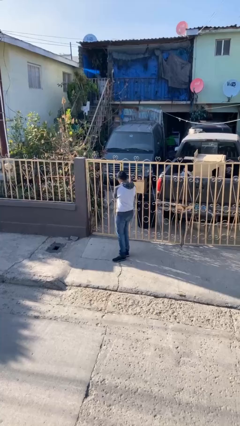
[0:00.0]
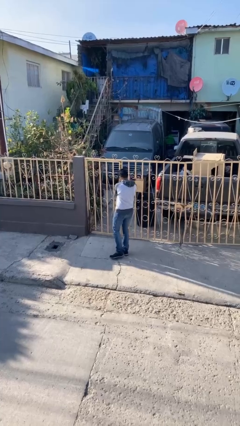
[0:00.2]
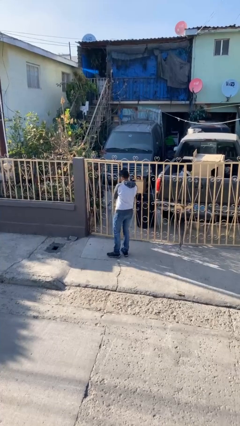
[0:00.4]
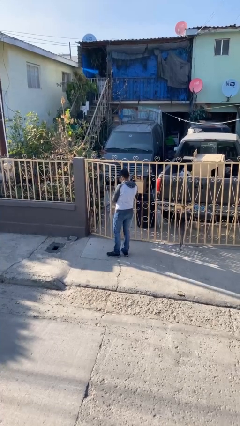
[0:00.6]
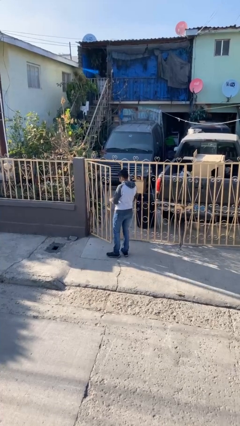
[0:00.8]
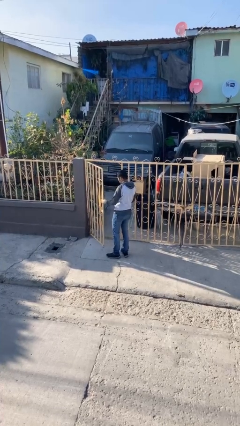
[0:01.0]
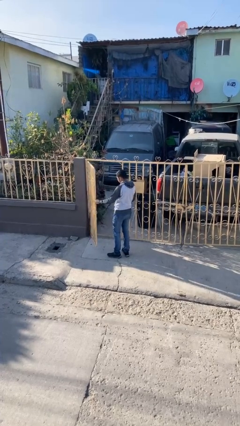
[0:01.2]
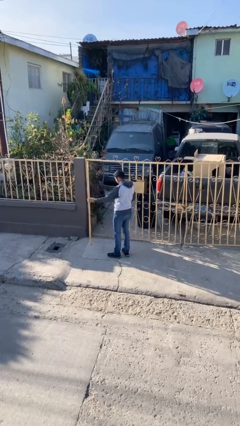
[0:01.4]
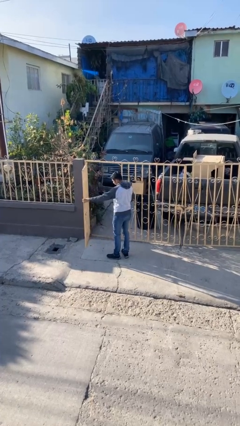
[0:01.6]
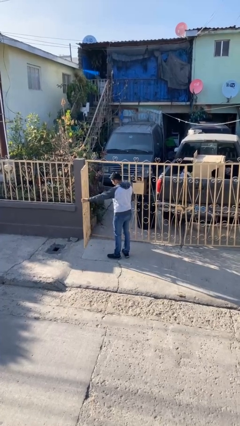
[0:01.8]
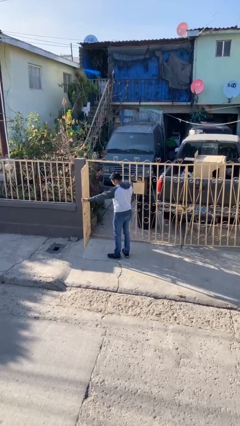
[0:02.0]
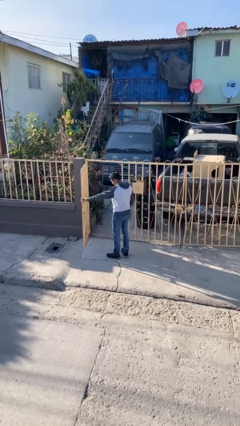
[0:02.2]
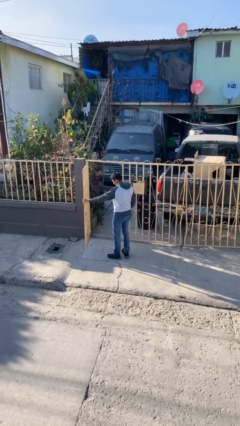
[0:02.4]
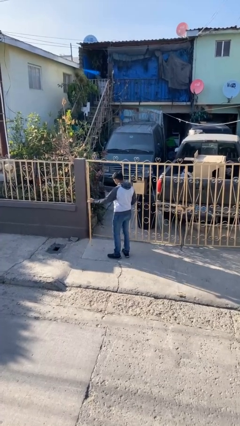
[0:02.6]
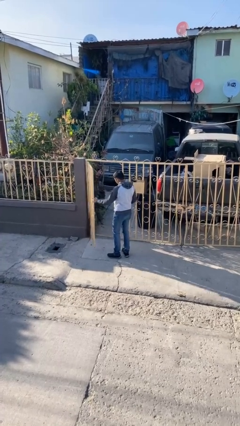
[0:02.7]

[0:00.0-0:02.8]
person opens facility door

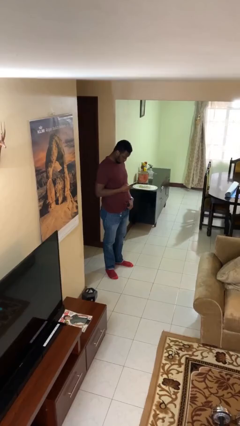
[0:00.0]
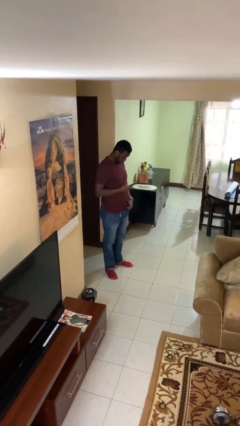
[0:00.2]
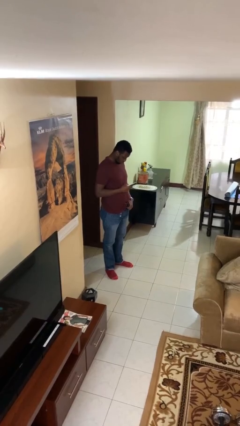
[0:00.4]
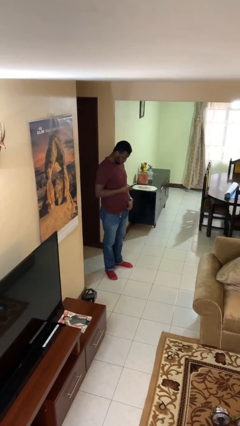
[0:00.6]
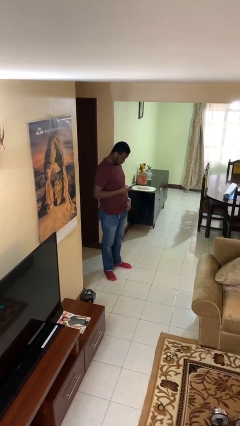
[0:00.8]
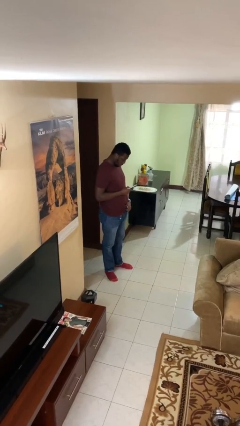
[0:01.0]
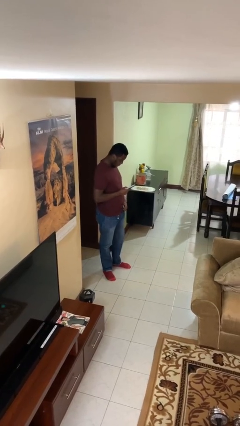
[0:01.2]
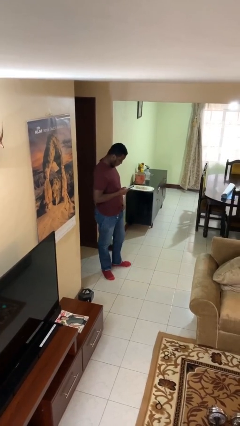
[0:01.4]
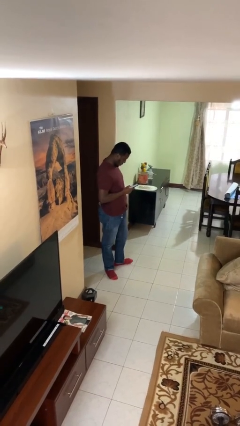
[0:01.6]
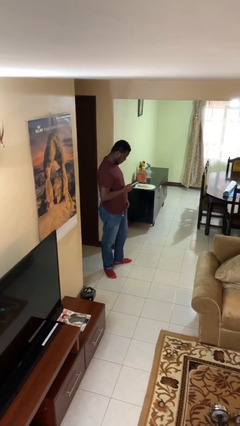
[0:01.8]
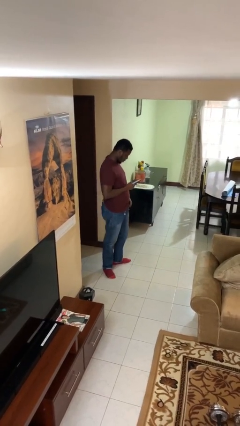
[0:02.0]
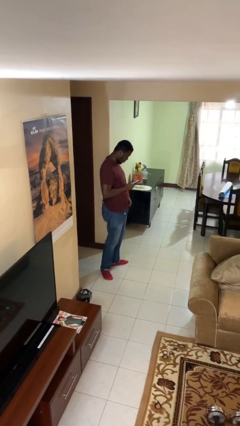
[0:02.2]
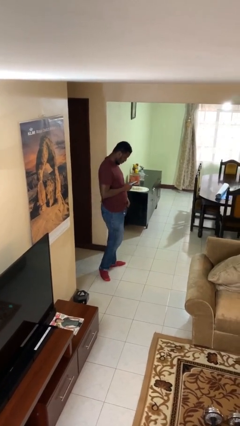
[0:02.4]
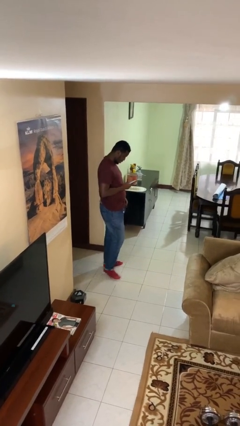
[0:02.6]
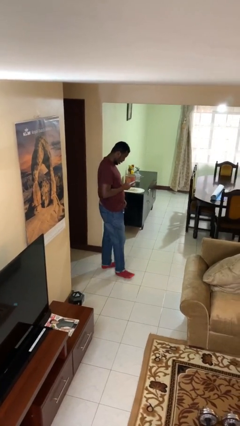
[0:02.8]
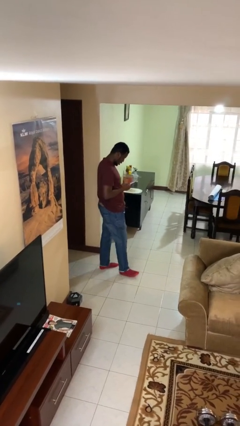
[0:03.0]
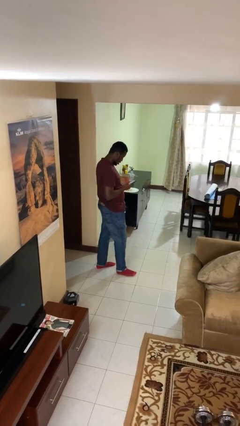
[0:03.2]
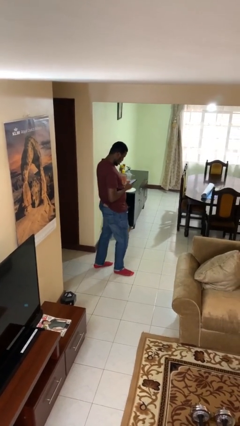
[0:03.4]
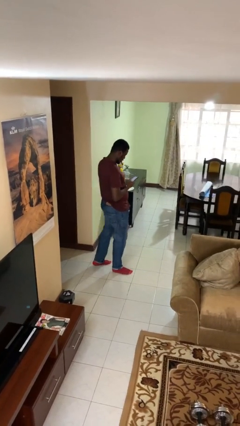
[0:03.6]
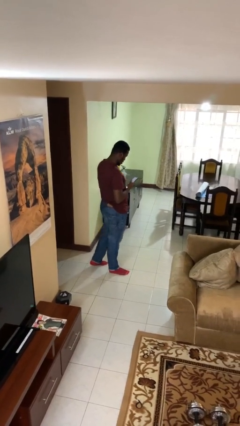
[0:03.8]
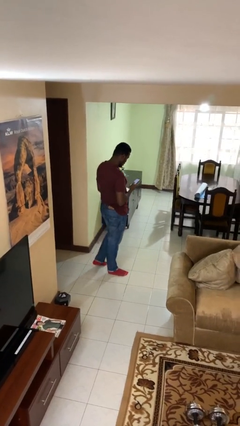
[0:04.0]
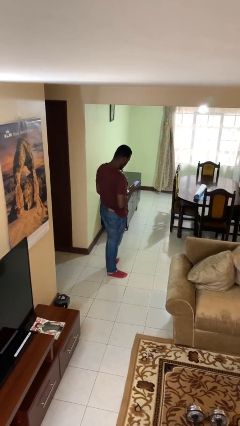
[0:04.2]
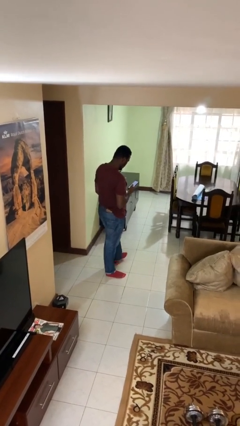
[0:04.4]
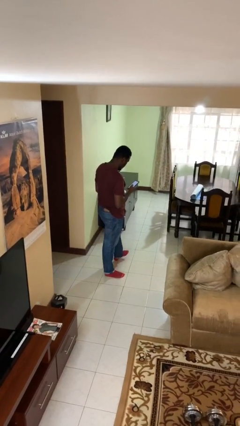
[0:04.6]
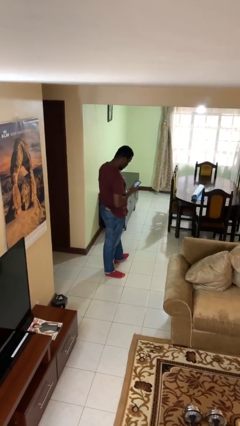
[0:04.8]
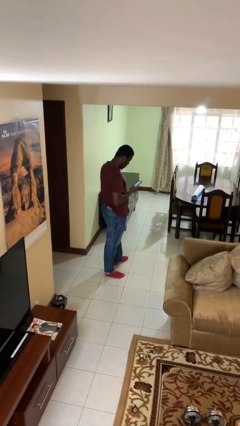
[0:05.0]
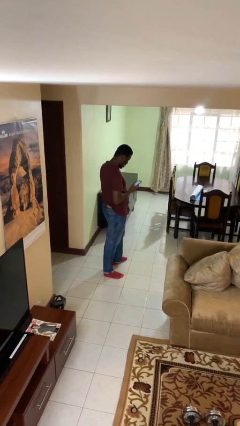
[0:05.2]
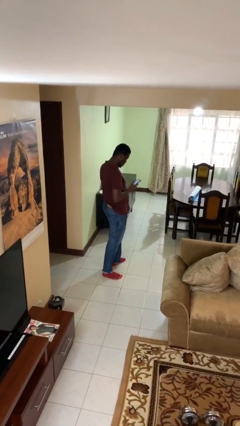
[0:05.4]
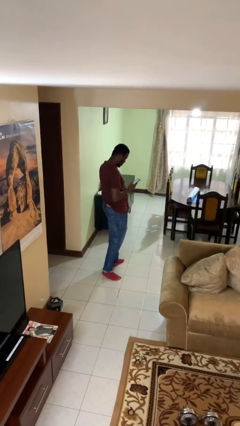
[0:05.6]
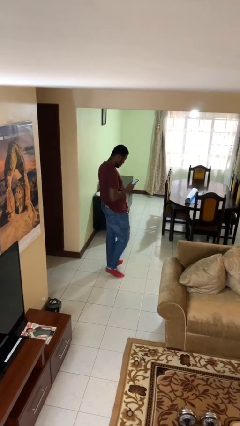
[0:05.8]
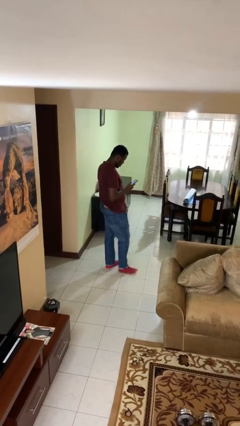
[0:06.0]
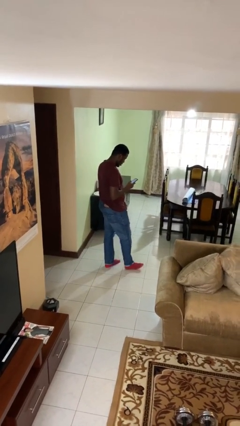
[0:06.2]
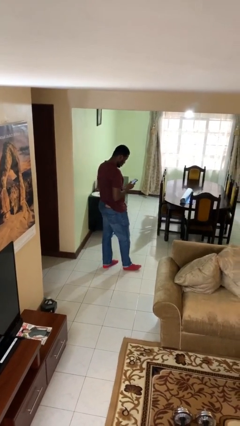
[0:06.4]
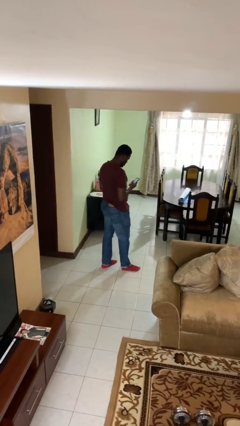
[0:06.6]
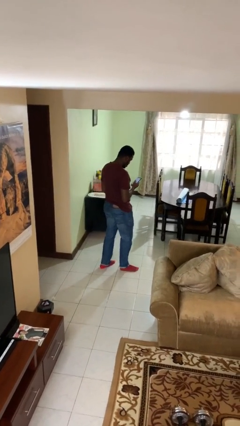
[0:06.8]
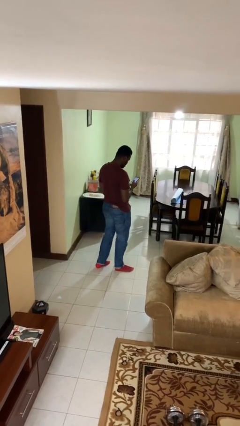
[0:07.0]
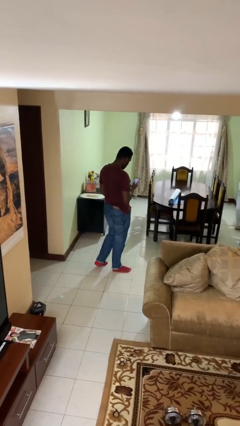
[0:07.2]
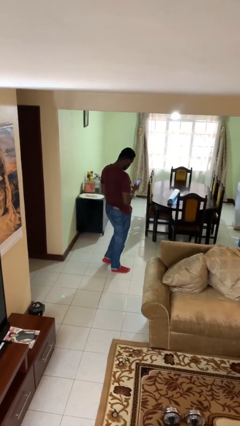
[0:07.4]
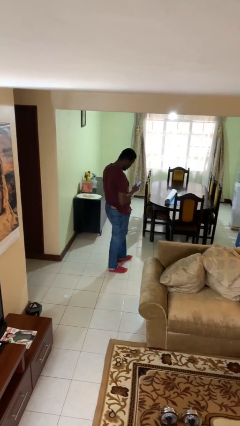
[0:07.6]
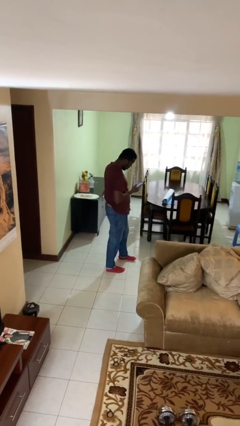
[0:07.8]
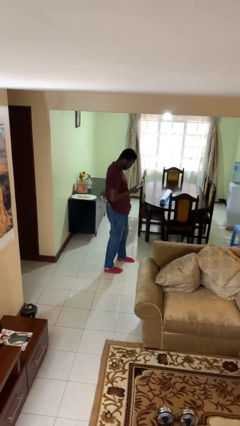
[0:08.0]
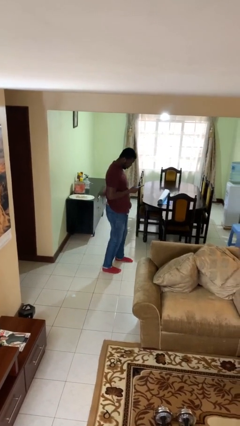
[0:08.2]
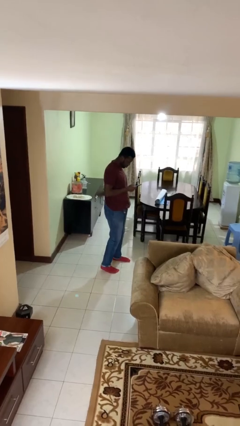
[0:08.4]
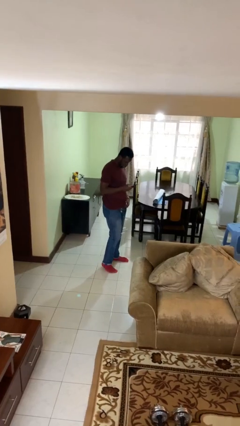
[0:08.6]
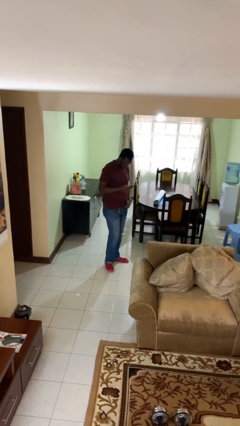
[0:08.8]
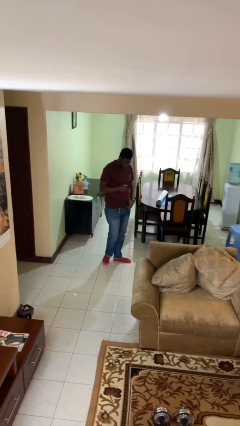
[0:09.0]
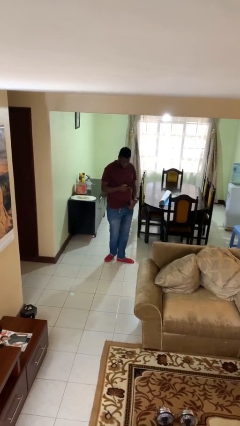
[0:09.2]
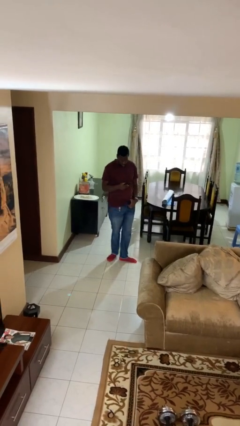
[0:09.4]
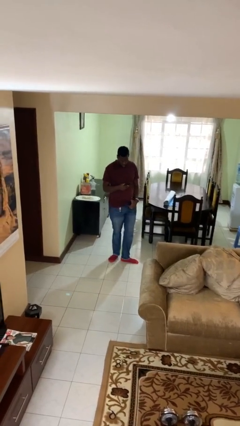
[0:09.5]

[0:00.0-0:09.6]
person texts on phone

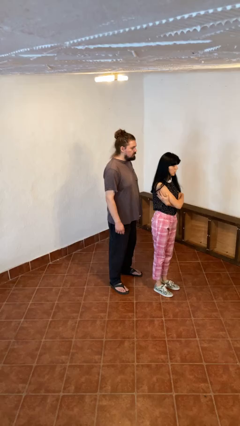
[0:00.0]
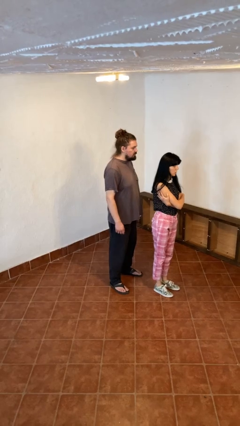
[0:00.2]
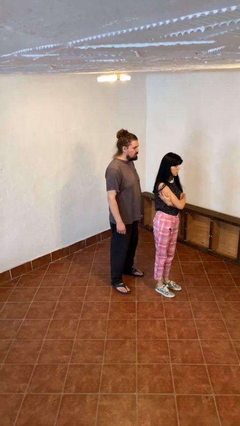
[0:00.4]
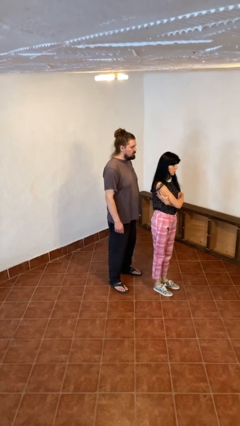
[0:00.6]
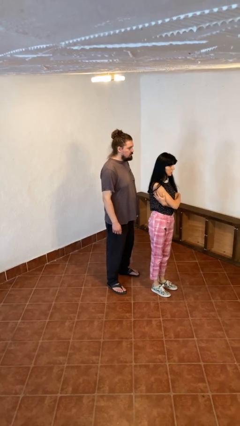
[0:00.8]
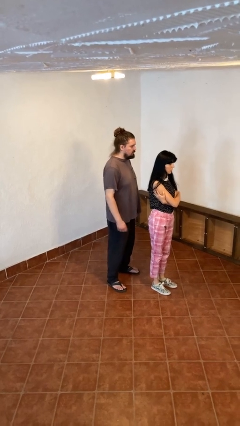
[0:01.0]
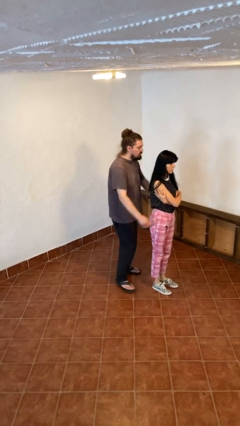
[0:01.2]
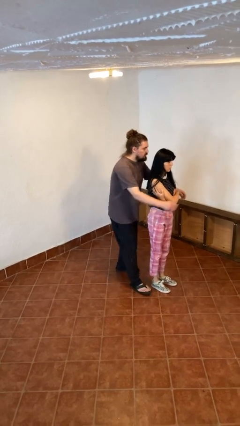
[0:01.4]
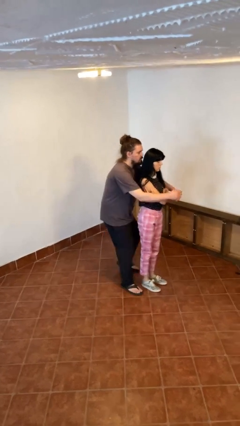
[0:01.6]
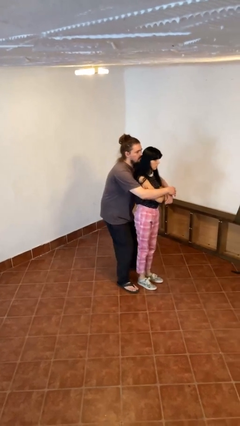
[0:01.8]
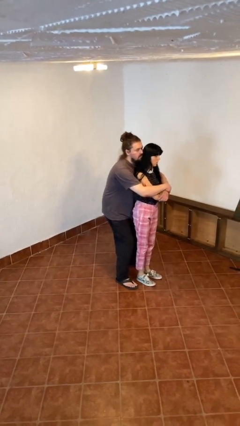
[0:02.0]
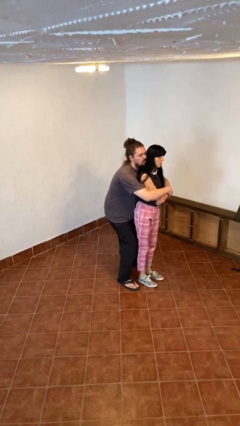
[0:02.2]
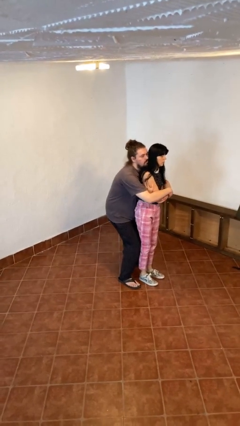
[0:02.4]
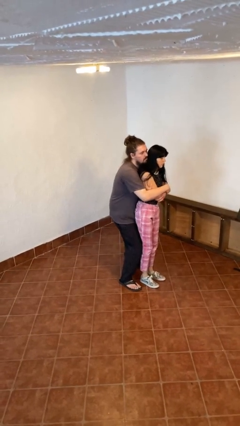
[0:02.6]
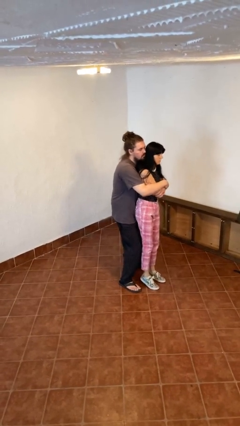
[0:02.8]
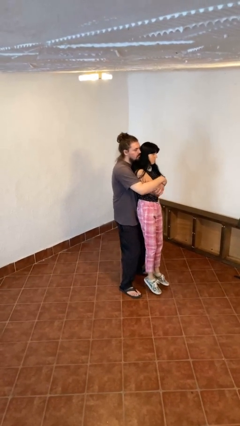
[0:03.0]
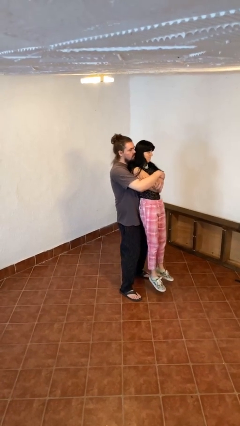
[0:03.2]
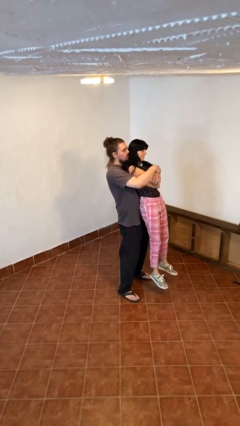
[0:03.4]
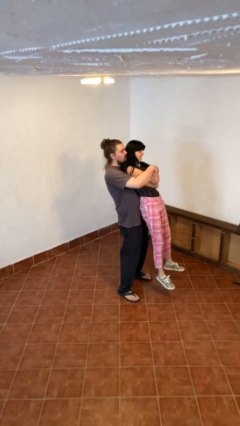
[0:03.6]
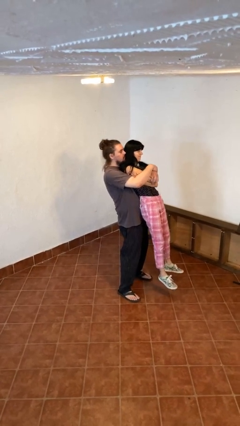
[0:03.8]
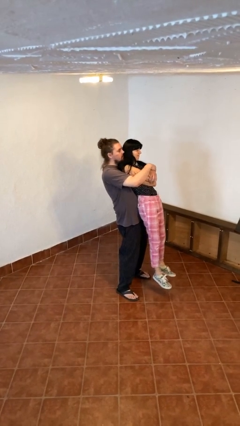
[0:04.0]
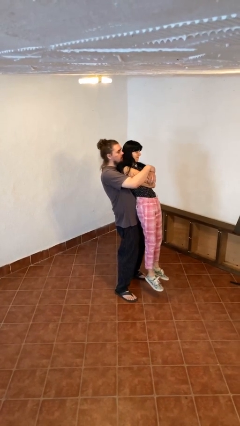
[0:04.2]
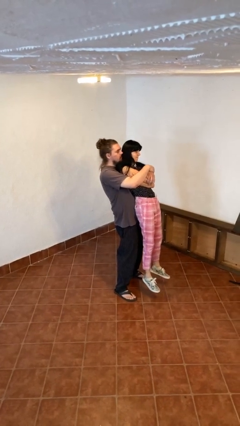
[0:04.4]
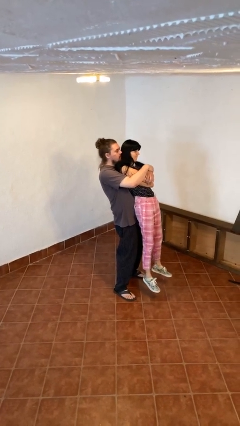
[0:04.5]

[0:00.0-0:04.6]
person picks up person

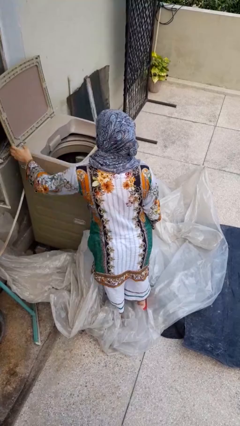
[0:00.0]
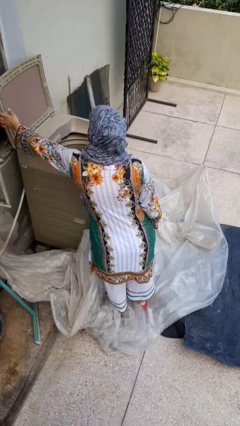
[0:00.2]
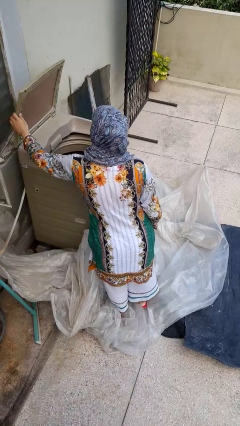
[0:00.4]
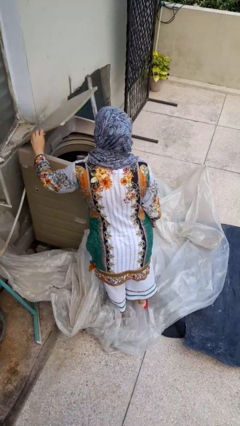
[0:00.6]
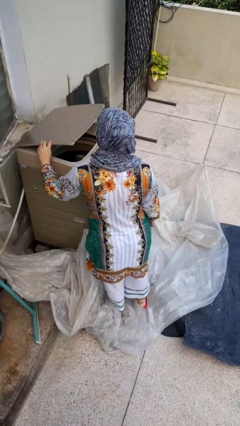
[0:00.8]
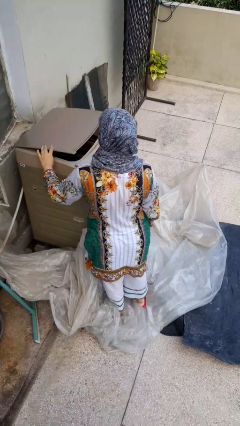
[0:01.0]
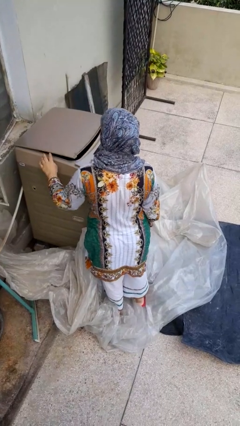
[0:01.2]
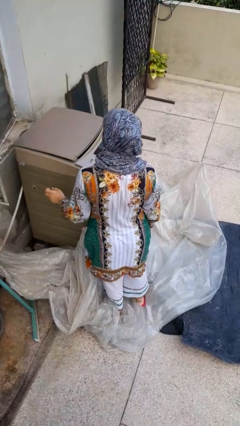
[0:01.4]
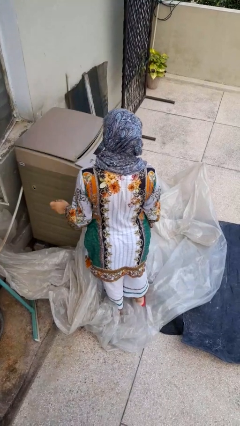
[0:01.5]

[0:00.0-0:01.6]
person closes clothes washer
